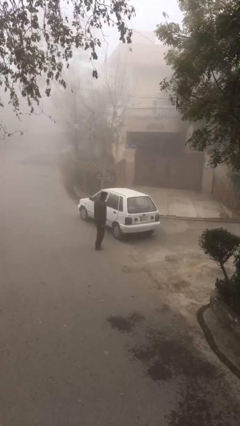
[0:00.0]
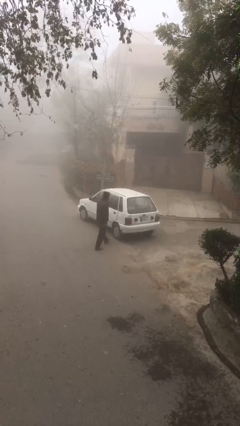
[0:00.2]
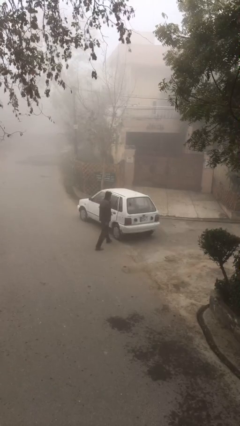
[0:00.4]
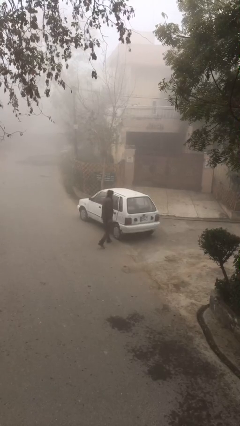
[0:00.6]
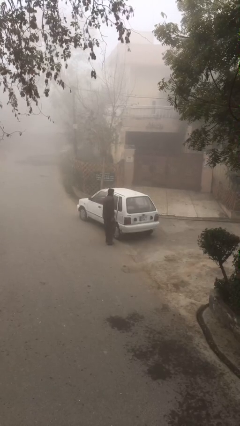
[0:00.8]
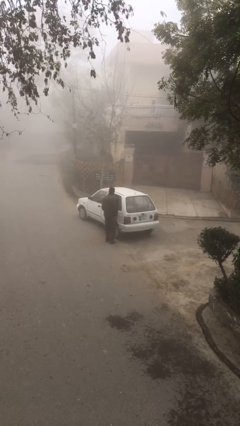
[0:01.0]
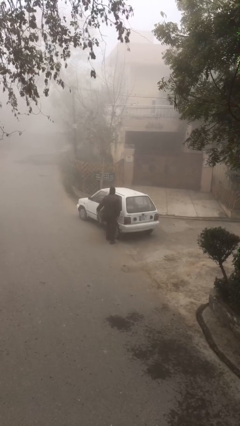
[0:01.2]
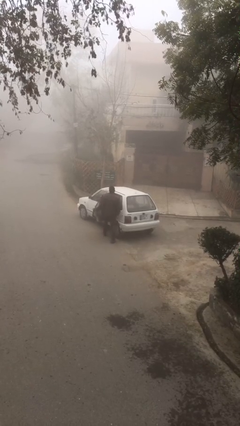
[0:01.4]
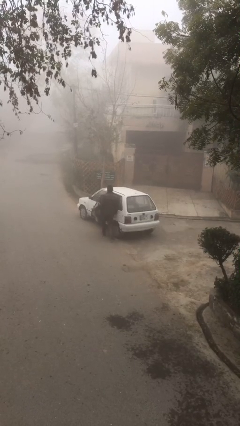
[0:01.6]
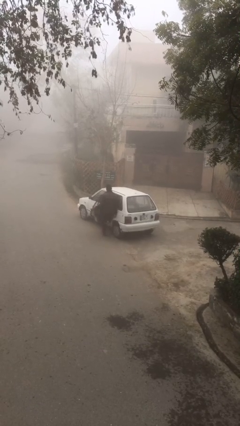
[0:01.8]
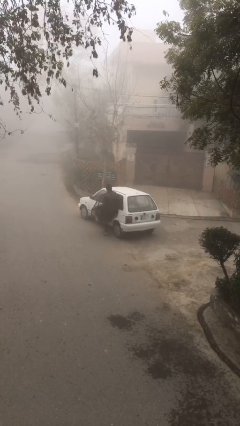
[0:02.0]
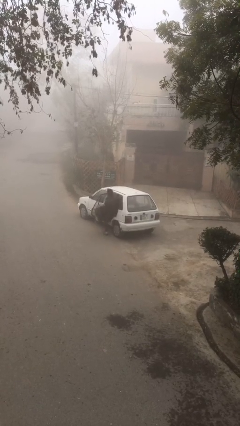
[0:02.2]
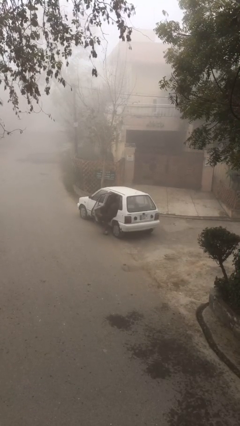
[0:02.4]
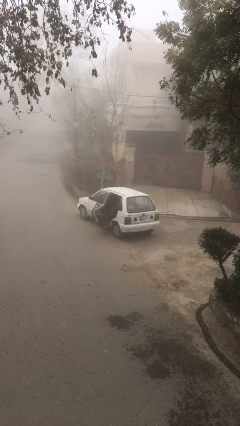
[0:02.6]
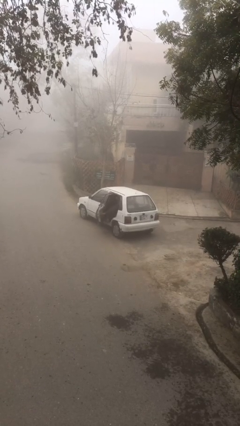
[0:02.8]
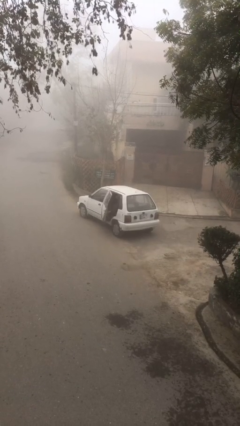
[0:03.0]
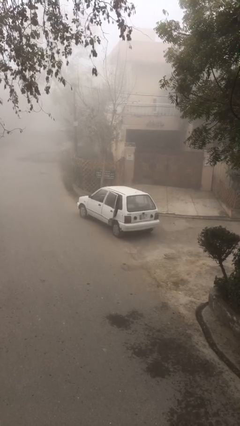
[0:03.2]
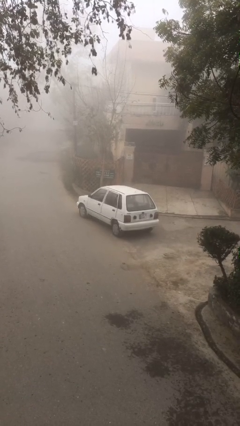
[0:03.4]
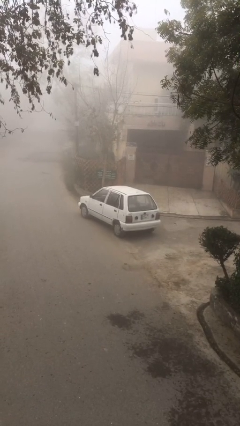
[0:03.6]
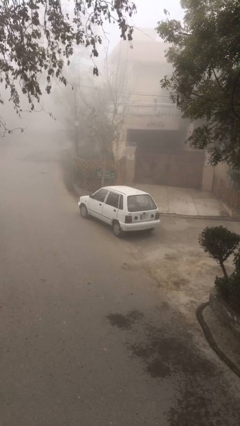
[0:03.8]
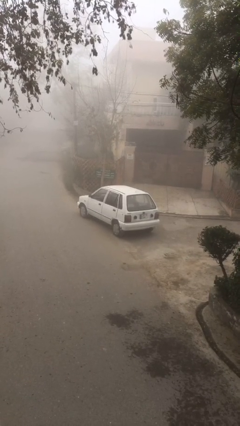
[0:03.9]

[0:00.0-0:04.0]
car picks up person

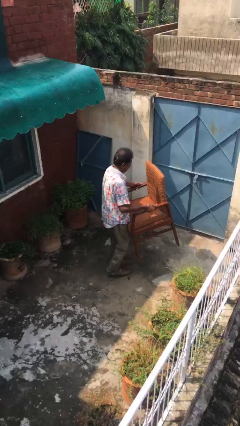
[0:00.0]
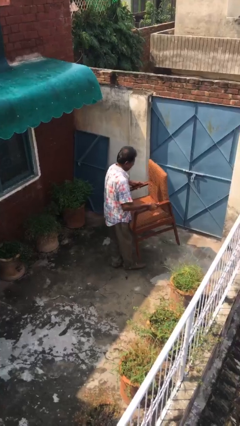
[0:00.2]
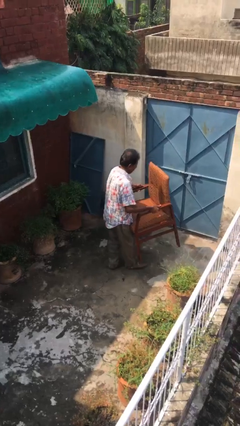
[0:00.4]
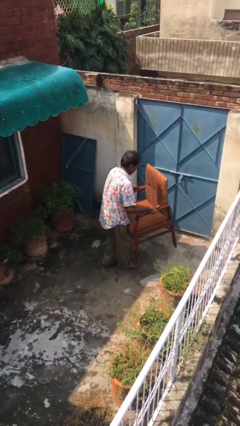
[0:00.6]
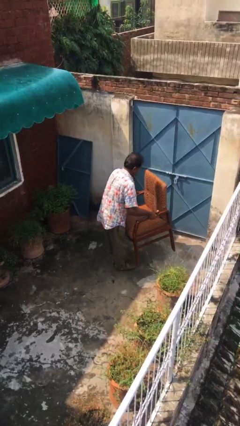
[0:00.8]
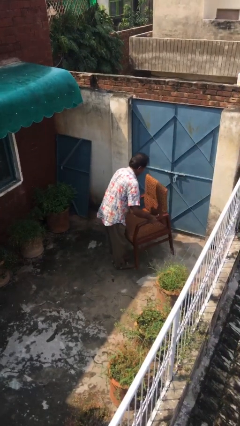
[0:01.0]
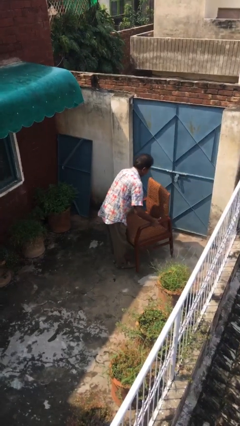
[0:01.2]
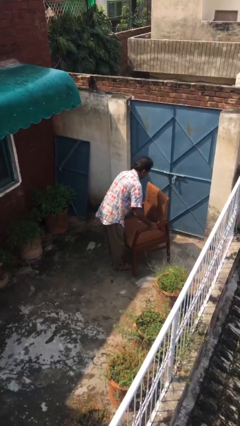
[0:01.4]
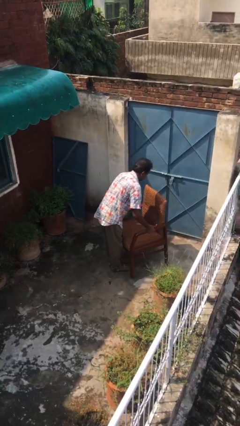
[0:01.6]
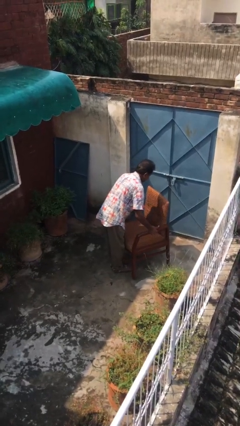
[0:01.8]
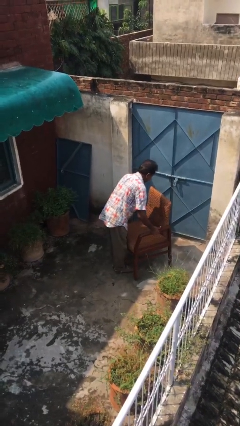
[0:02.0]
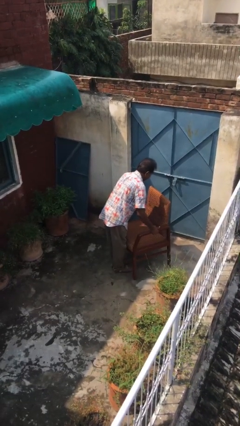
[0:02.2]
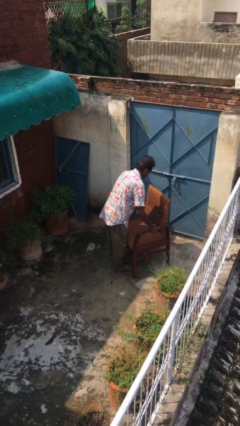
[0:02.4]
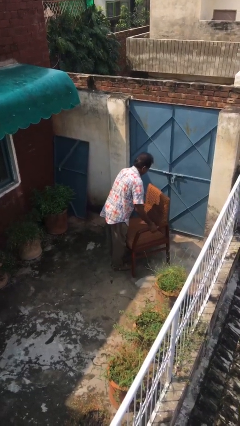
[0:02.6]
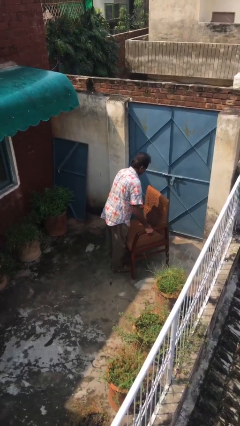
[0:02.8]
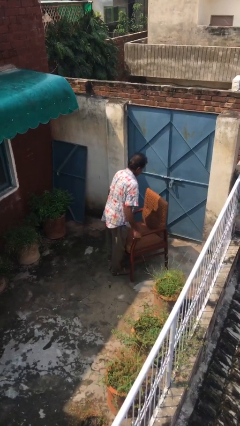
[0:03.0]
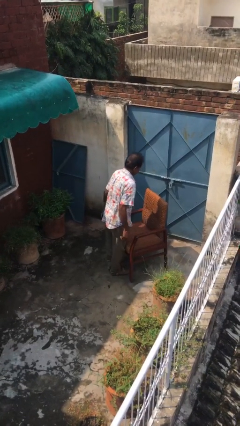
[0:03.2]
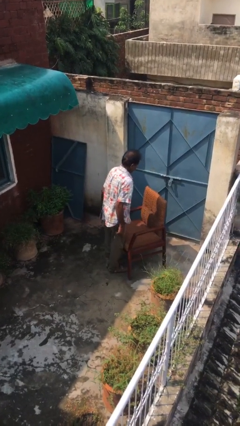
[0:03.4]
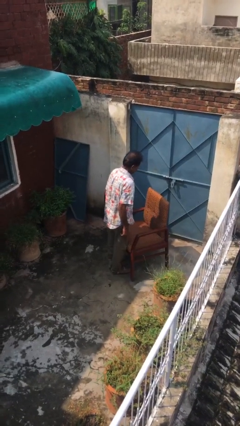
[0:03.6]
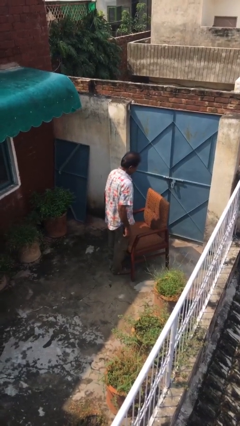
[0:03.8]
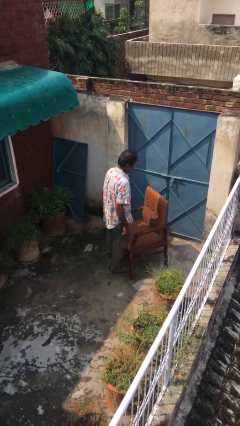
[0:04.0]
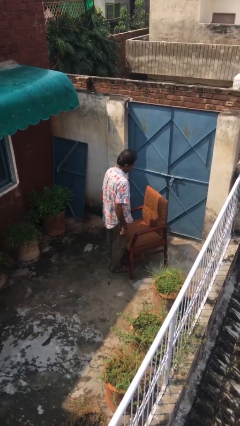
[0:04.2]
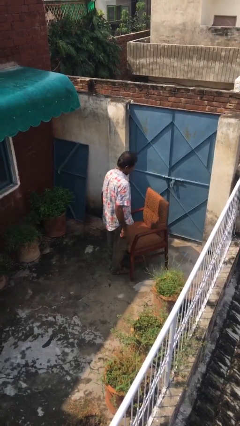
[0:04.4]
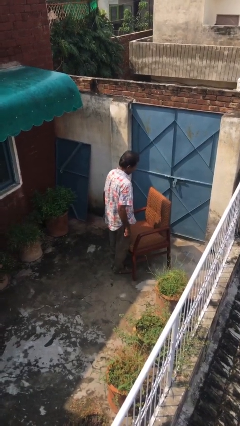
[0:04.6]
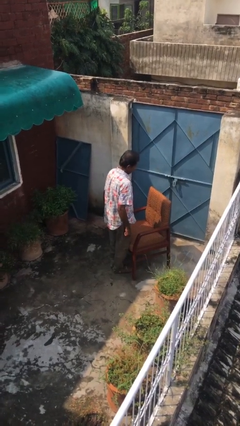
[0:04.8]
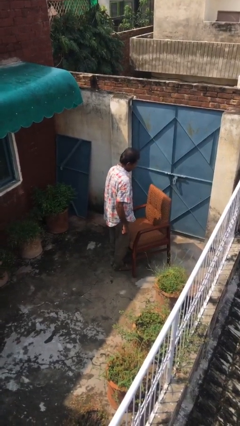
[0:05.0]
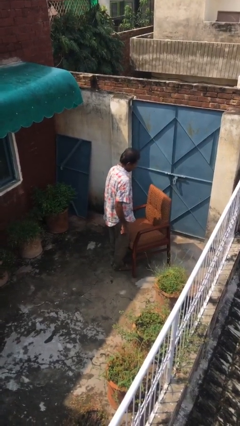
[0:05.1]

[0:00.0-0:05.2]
person puts down object on floor

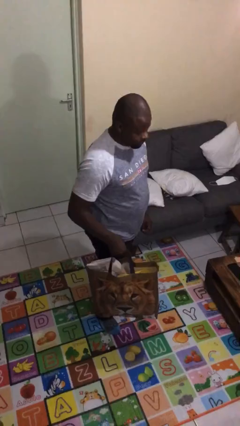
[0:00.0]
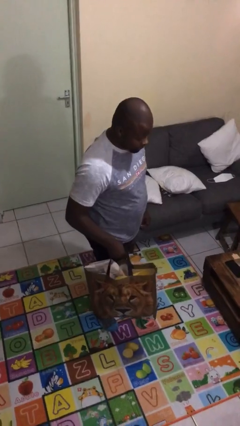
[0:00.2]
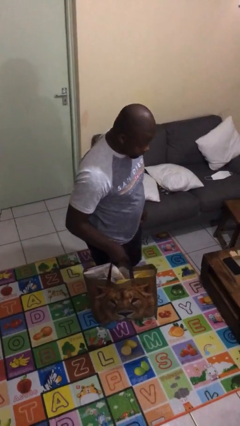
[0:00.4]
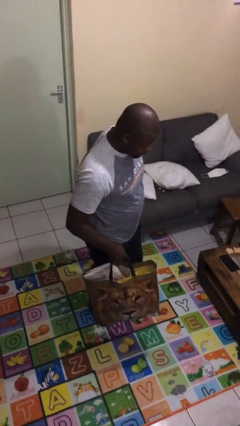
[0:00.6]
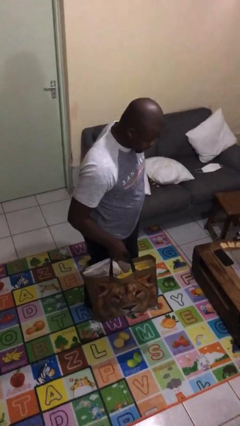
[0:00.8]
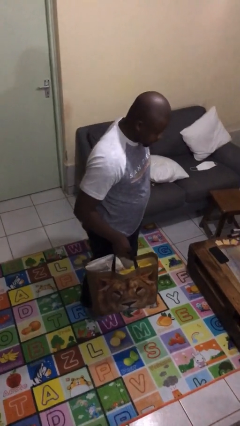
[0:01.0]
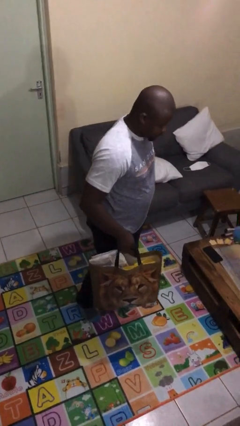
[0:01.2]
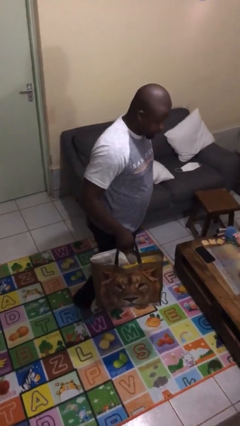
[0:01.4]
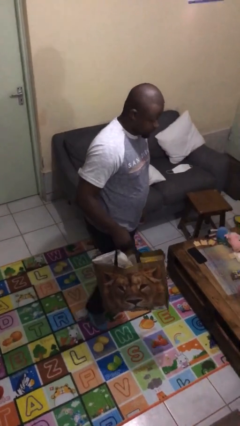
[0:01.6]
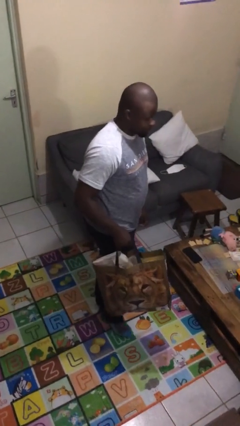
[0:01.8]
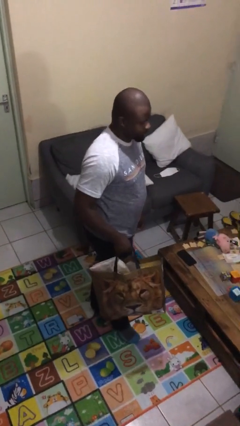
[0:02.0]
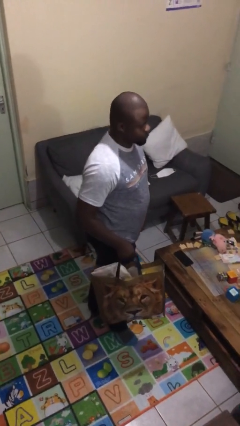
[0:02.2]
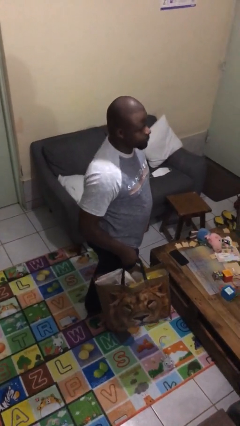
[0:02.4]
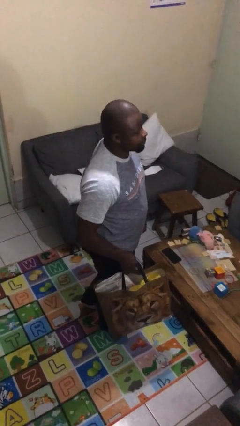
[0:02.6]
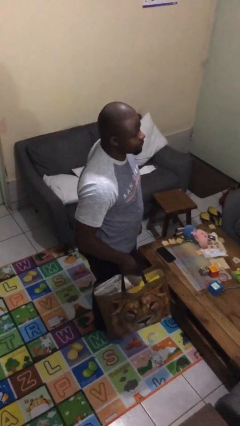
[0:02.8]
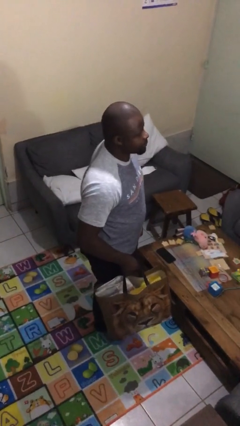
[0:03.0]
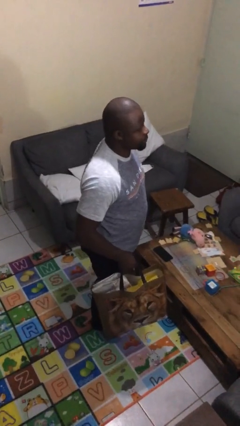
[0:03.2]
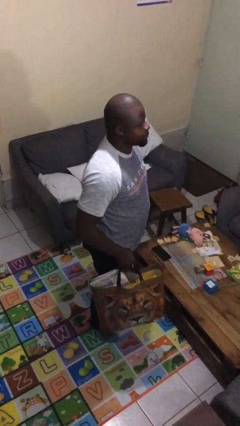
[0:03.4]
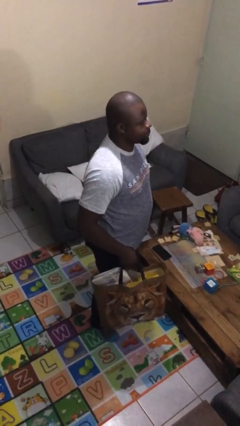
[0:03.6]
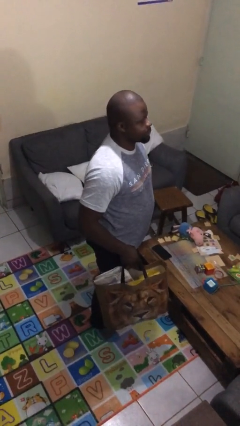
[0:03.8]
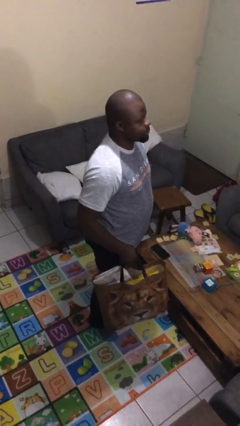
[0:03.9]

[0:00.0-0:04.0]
person carries groceries

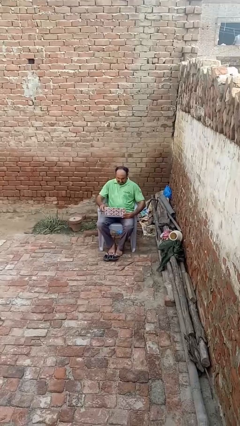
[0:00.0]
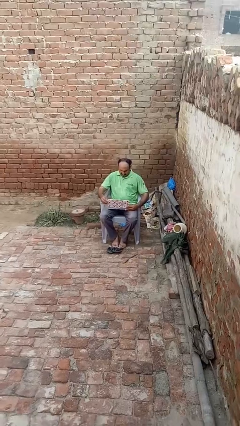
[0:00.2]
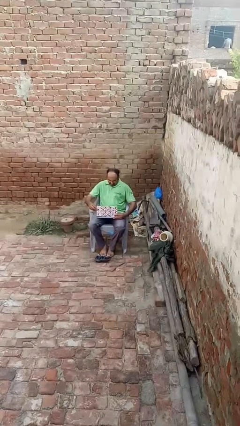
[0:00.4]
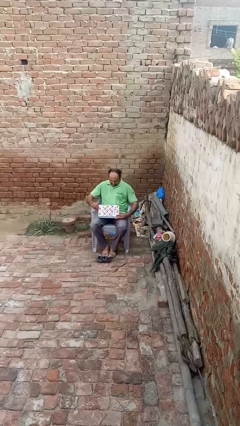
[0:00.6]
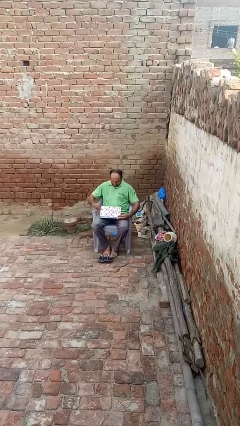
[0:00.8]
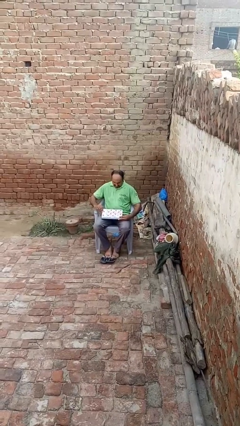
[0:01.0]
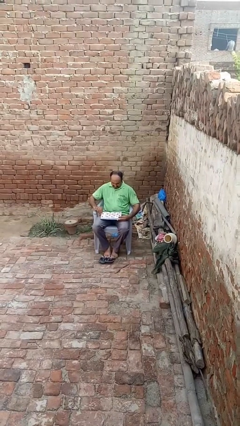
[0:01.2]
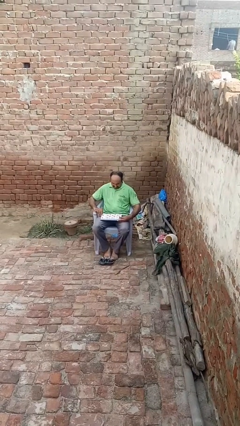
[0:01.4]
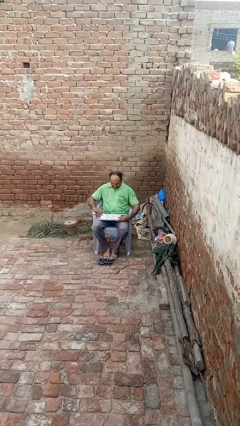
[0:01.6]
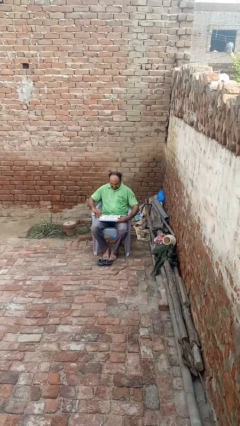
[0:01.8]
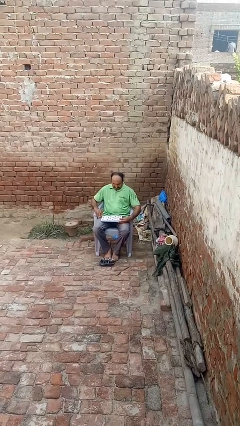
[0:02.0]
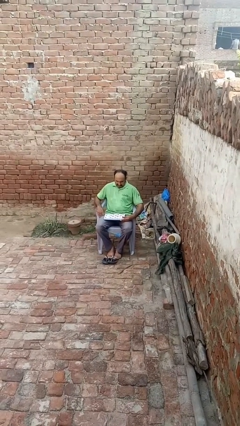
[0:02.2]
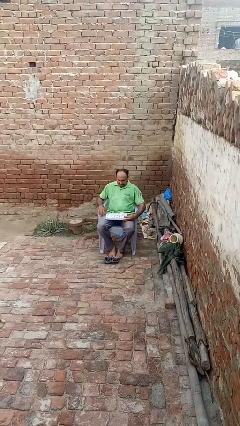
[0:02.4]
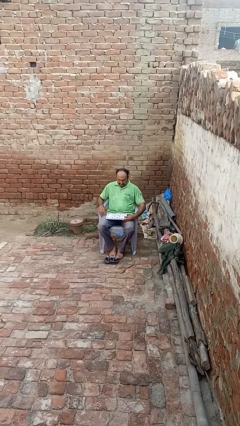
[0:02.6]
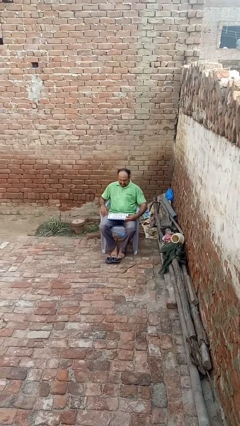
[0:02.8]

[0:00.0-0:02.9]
person closes laptop

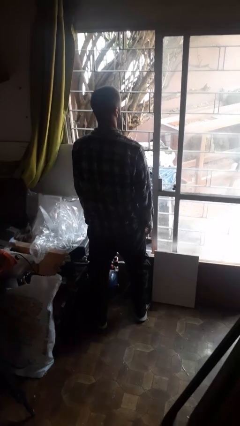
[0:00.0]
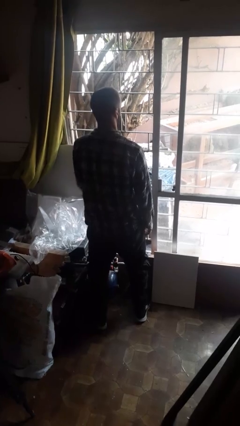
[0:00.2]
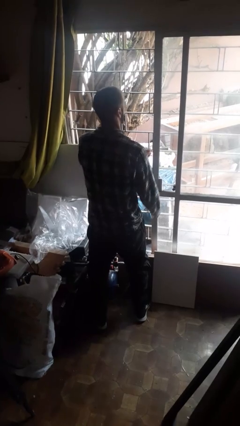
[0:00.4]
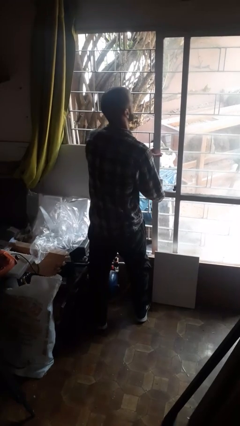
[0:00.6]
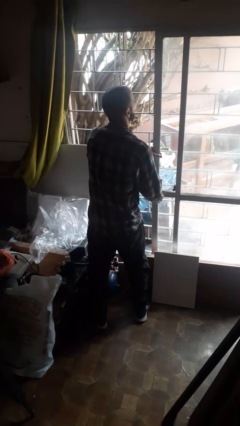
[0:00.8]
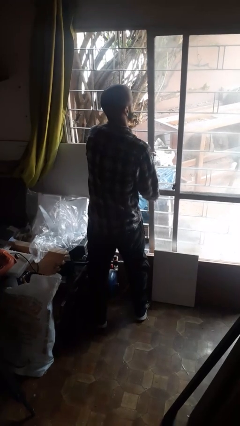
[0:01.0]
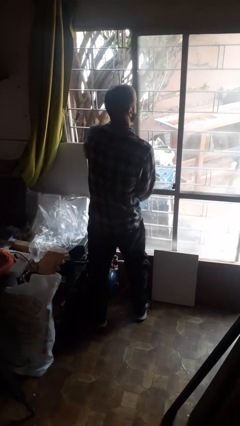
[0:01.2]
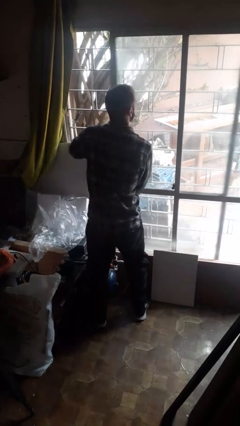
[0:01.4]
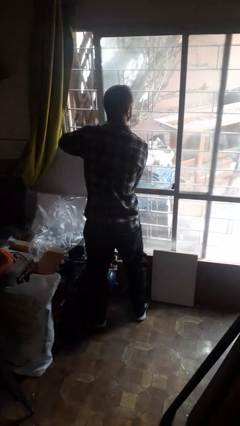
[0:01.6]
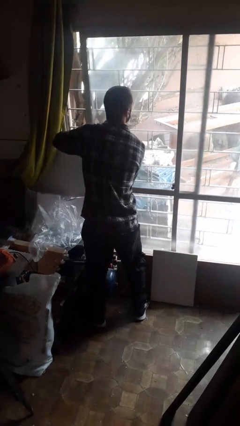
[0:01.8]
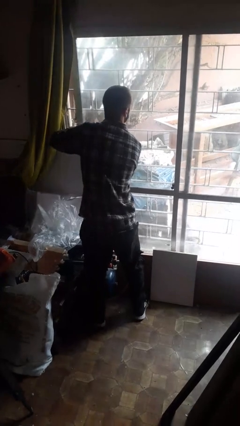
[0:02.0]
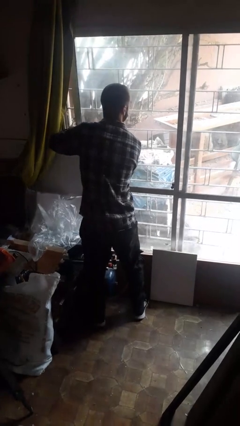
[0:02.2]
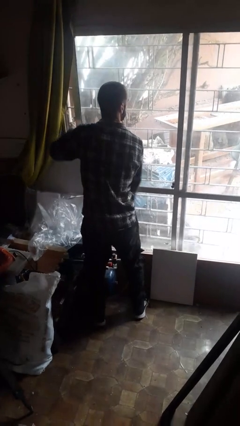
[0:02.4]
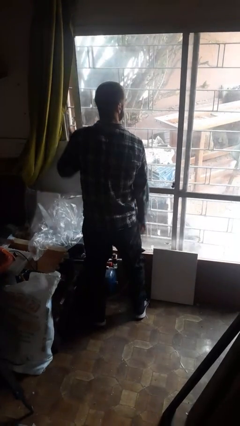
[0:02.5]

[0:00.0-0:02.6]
person closes sliding door
